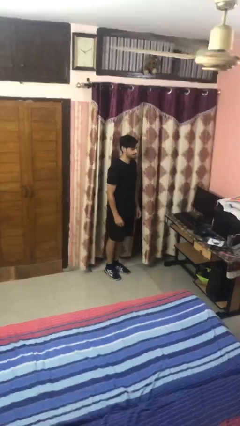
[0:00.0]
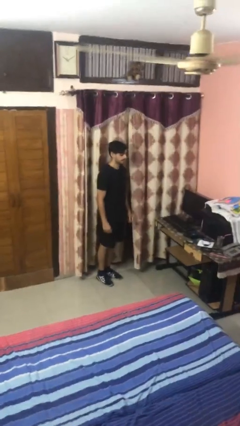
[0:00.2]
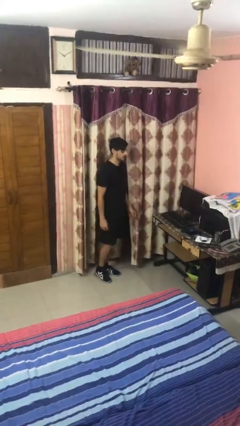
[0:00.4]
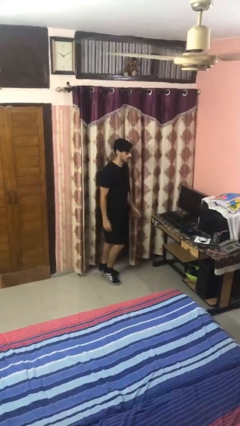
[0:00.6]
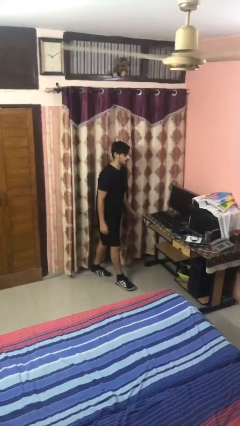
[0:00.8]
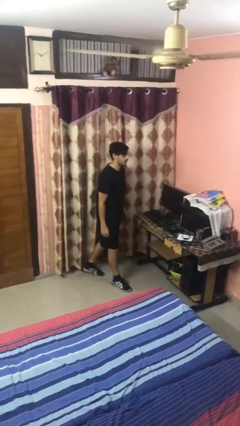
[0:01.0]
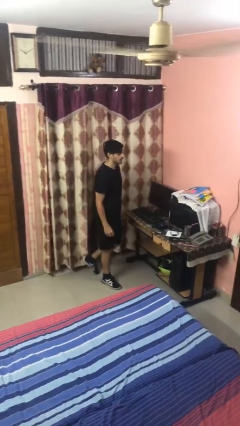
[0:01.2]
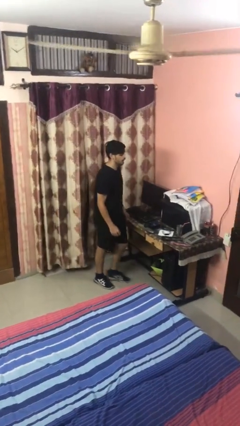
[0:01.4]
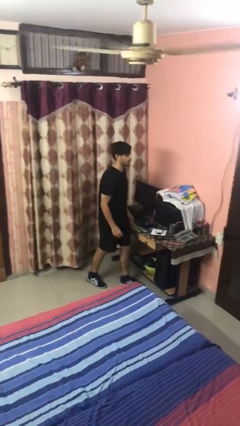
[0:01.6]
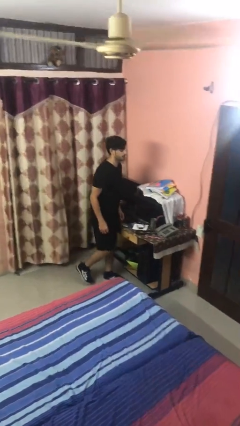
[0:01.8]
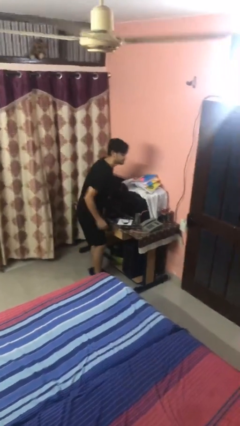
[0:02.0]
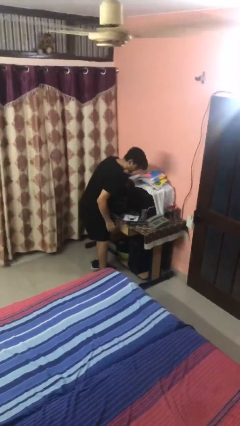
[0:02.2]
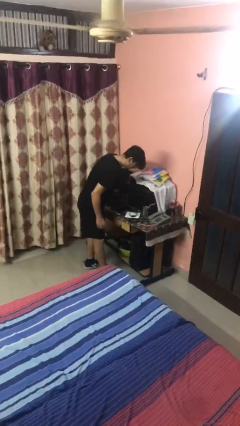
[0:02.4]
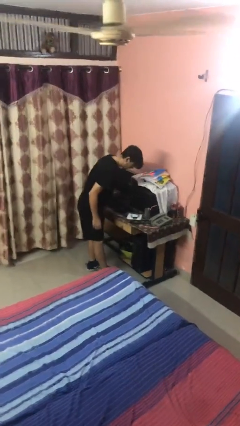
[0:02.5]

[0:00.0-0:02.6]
person bumps into table

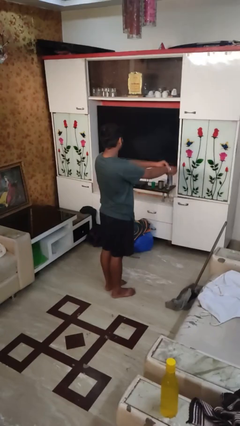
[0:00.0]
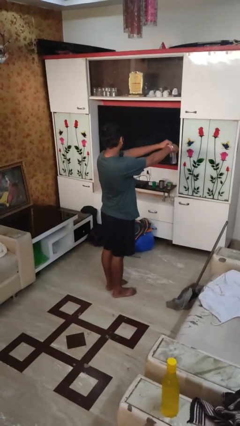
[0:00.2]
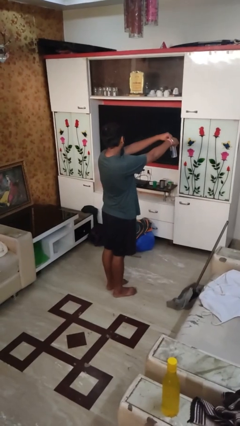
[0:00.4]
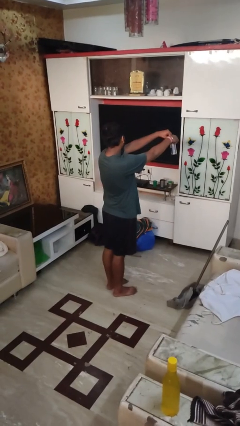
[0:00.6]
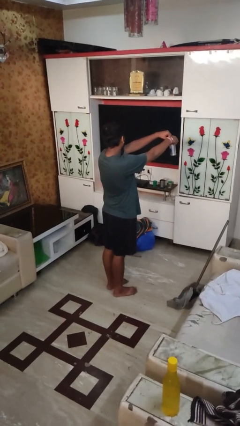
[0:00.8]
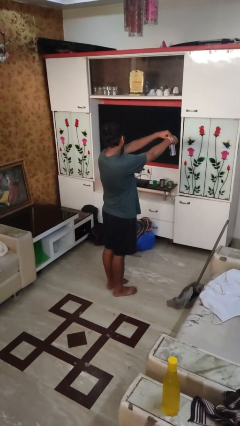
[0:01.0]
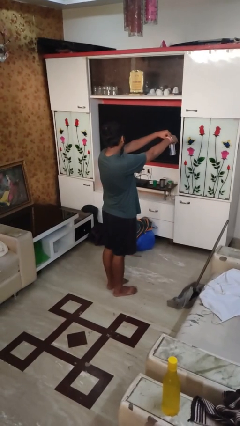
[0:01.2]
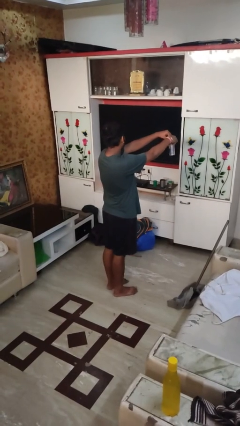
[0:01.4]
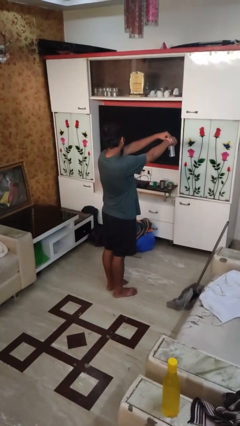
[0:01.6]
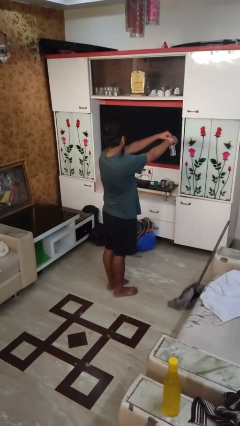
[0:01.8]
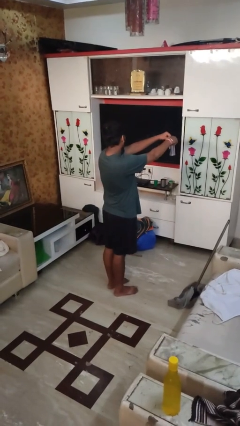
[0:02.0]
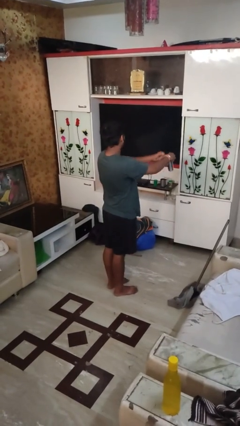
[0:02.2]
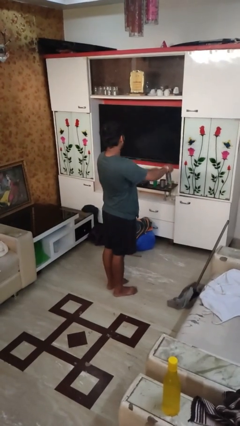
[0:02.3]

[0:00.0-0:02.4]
person opens beverage can

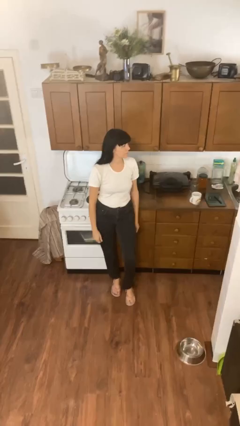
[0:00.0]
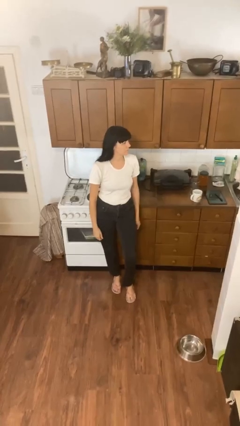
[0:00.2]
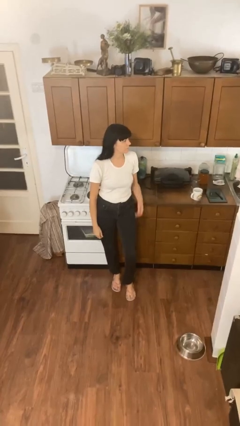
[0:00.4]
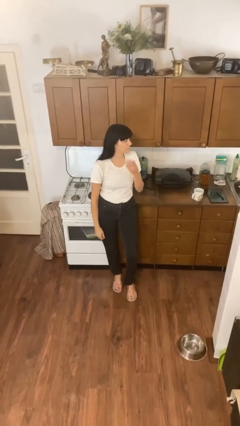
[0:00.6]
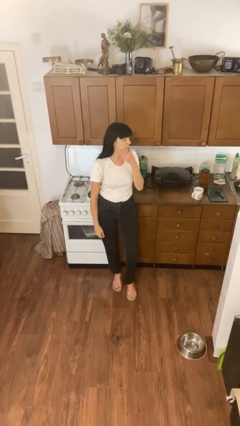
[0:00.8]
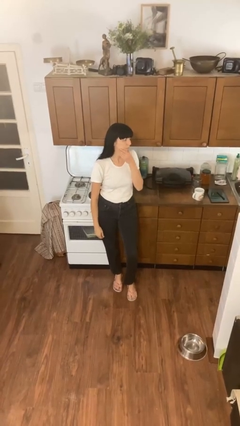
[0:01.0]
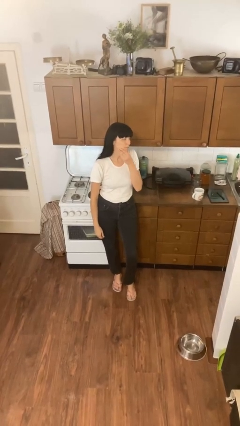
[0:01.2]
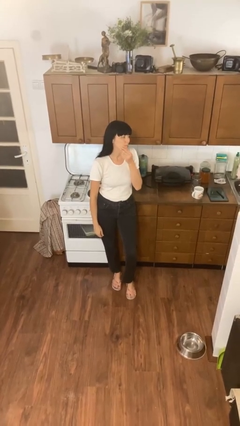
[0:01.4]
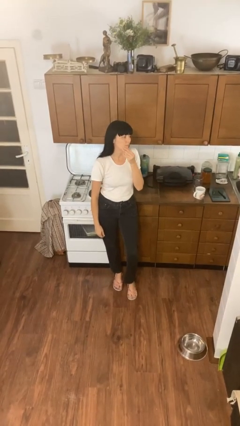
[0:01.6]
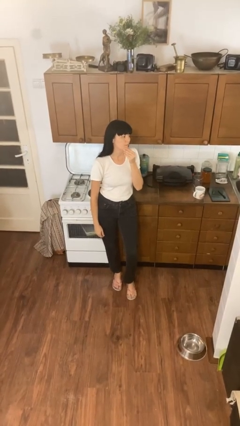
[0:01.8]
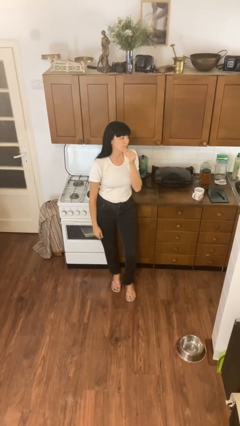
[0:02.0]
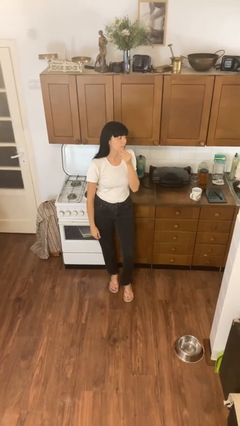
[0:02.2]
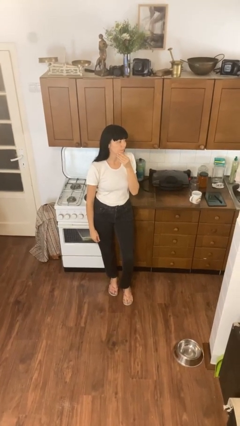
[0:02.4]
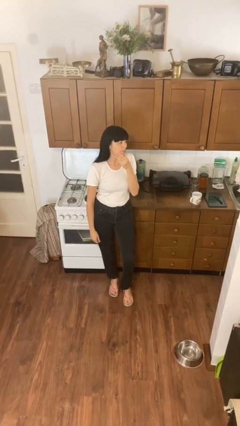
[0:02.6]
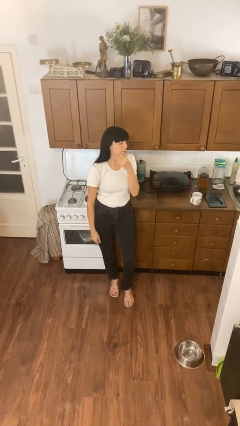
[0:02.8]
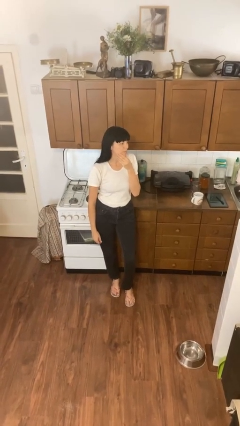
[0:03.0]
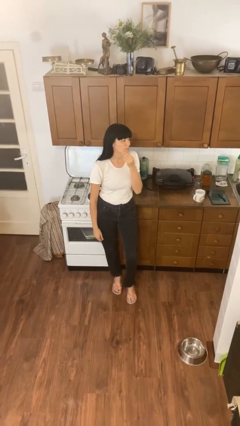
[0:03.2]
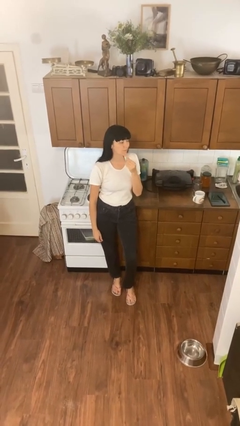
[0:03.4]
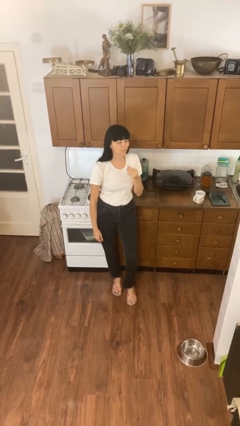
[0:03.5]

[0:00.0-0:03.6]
person strokes chin

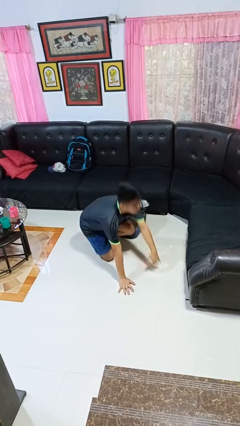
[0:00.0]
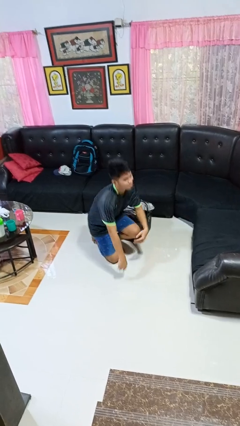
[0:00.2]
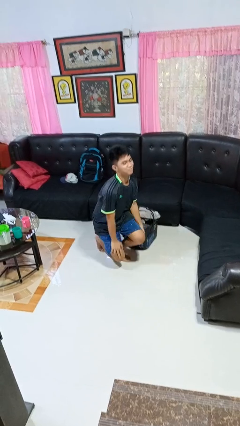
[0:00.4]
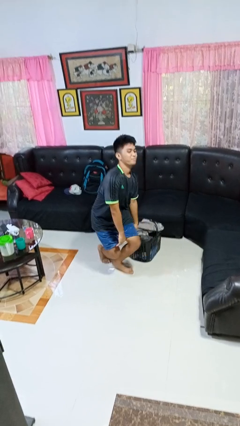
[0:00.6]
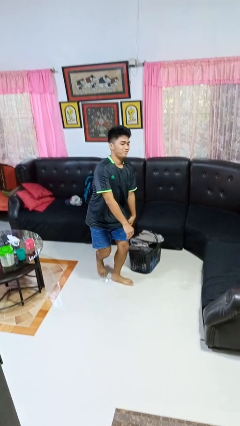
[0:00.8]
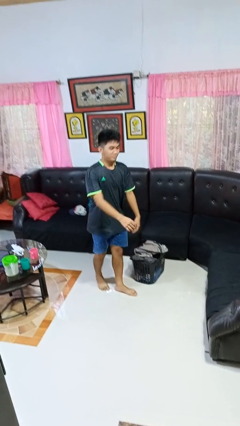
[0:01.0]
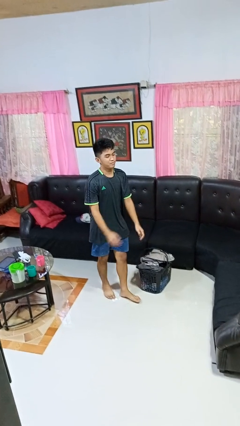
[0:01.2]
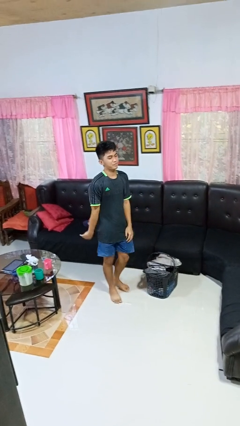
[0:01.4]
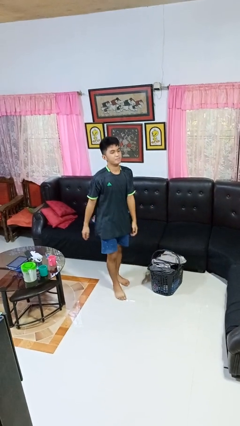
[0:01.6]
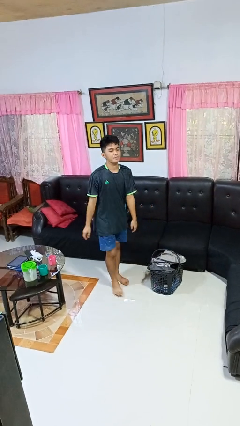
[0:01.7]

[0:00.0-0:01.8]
person stands up from floor

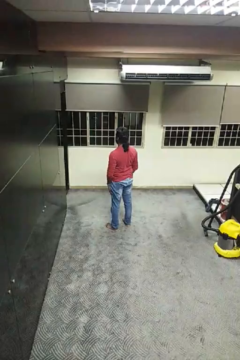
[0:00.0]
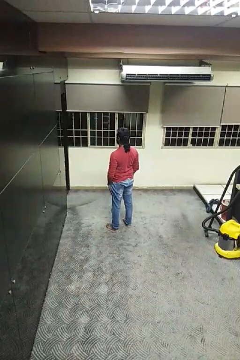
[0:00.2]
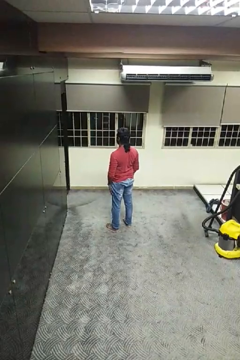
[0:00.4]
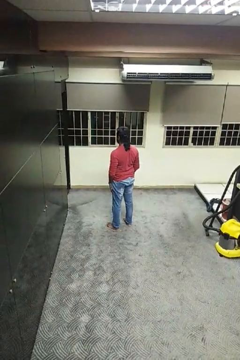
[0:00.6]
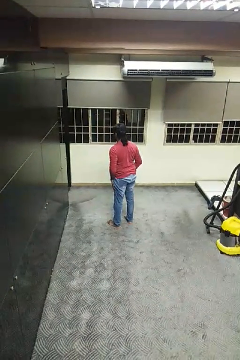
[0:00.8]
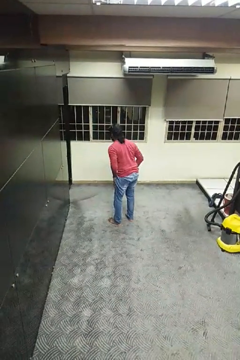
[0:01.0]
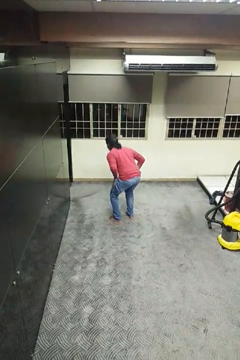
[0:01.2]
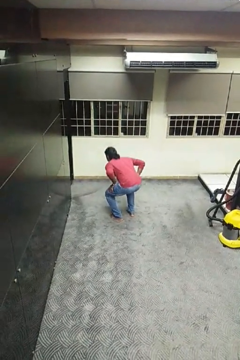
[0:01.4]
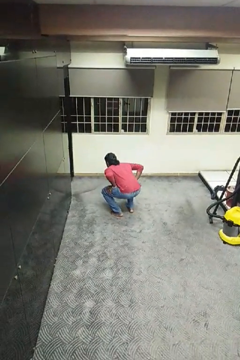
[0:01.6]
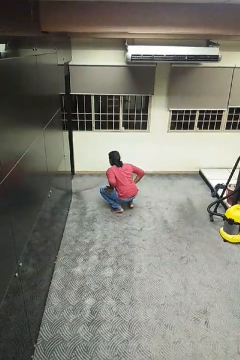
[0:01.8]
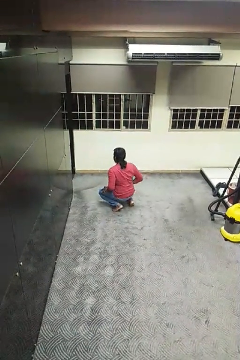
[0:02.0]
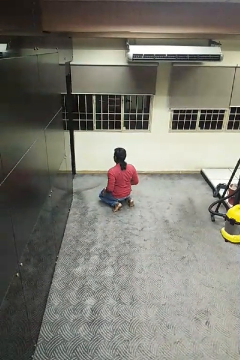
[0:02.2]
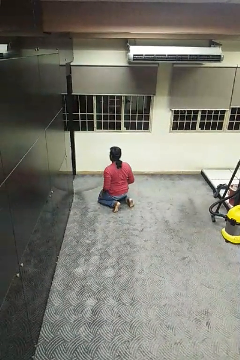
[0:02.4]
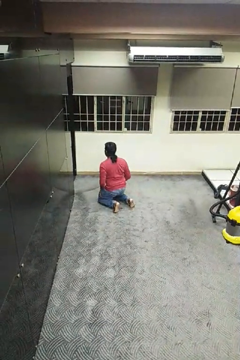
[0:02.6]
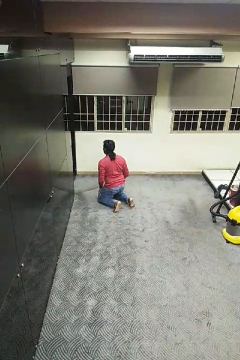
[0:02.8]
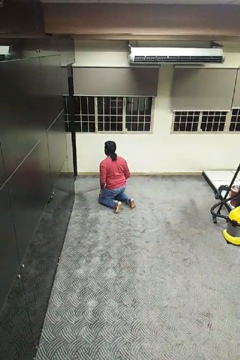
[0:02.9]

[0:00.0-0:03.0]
person kneels

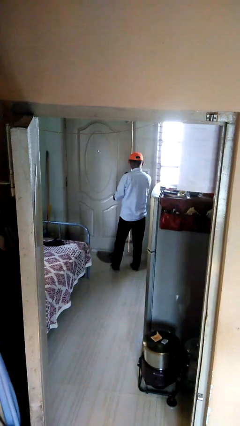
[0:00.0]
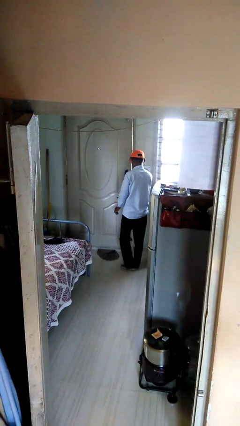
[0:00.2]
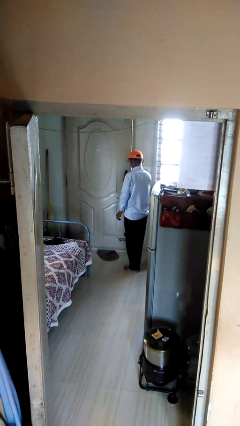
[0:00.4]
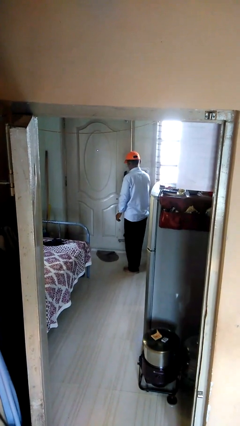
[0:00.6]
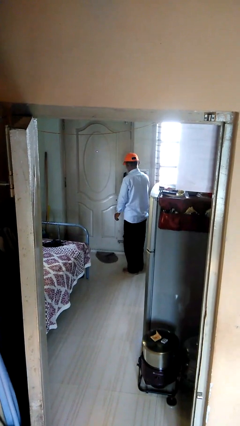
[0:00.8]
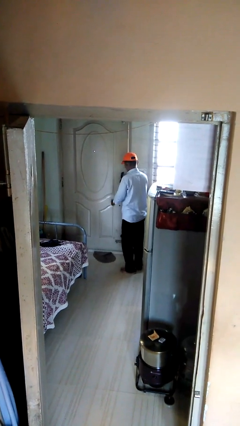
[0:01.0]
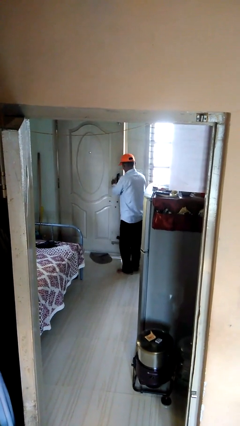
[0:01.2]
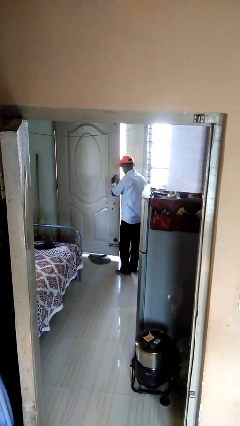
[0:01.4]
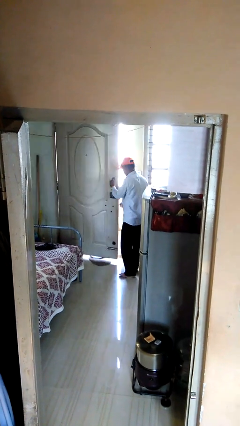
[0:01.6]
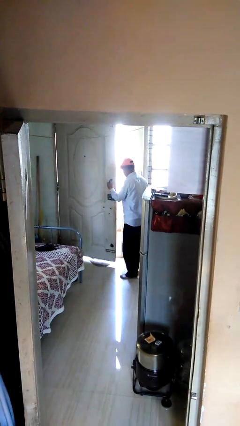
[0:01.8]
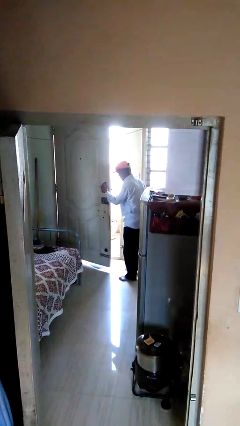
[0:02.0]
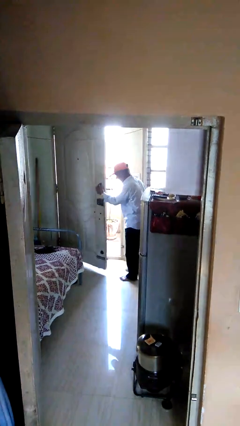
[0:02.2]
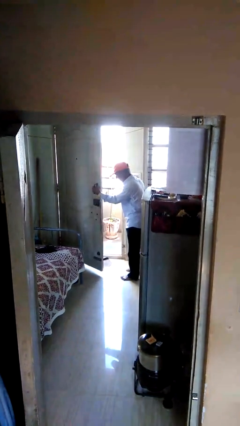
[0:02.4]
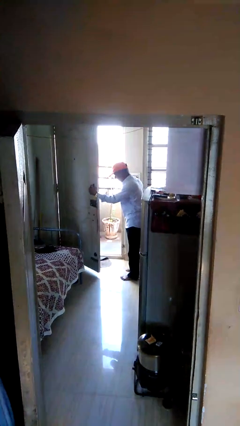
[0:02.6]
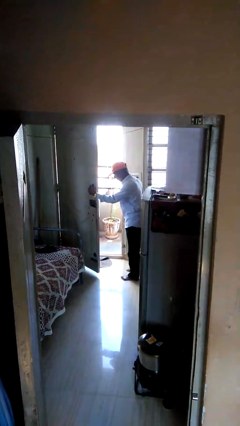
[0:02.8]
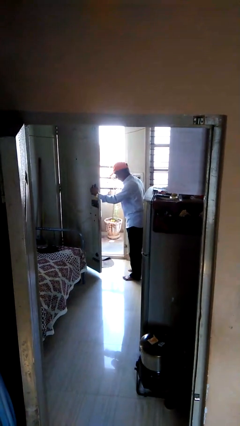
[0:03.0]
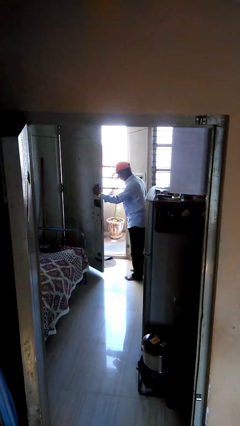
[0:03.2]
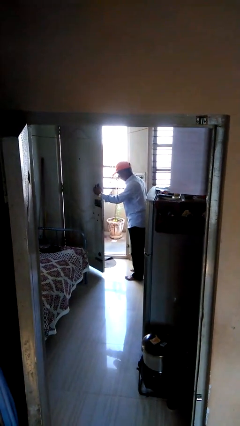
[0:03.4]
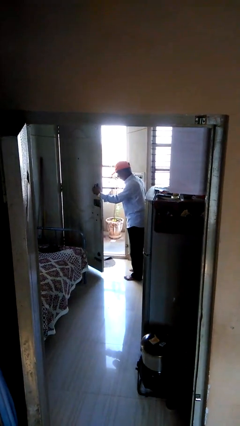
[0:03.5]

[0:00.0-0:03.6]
person opens facility door

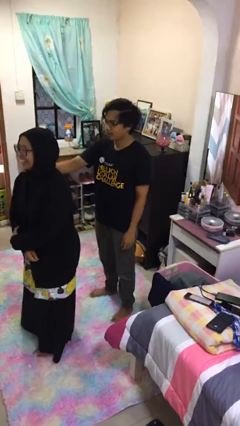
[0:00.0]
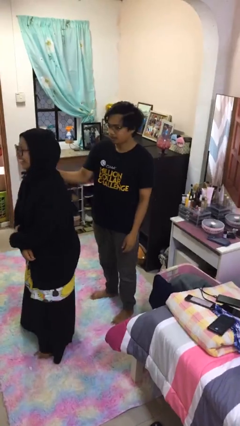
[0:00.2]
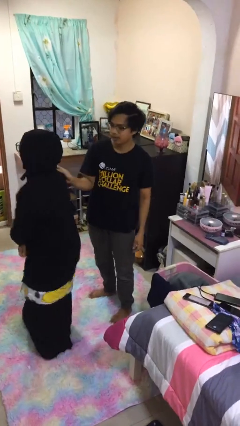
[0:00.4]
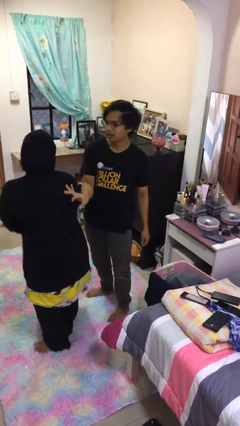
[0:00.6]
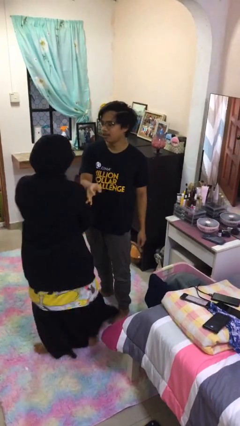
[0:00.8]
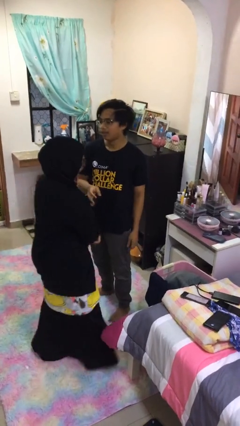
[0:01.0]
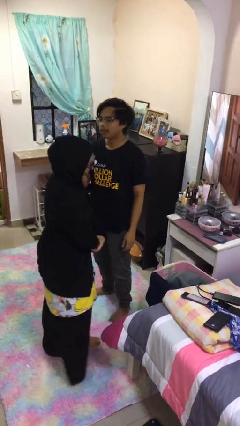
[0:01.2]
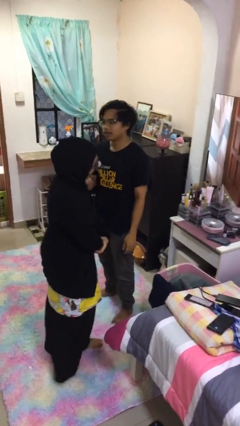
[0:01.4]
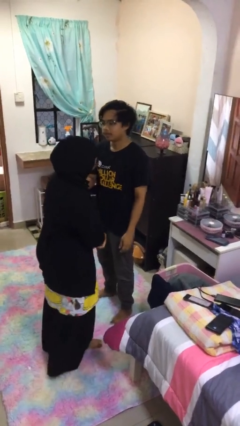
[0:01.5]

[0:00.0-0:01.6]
person spins person around
